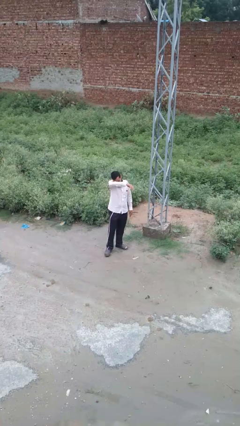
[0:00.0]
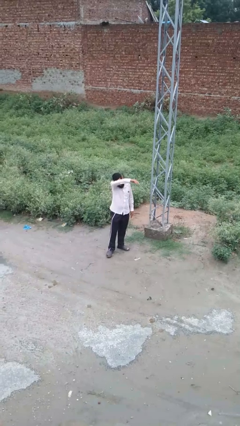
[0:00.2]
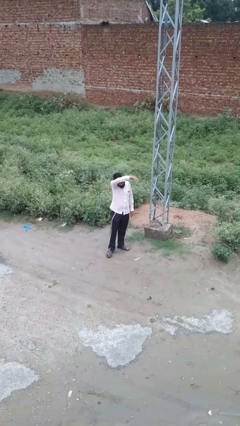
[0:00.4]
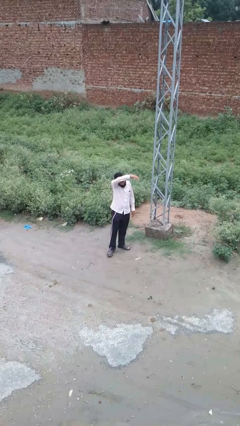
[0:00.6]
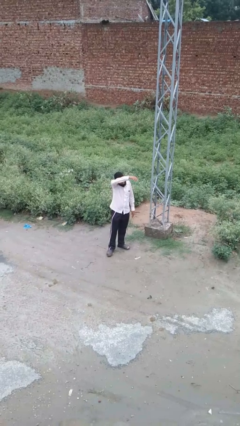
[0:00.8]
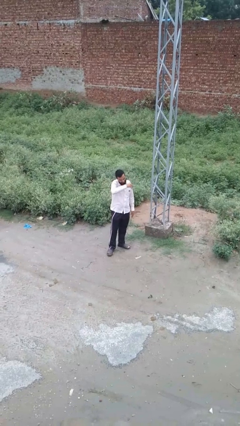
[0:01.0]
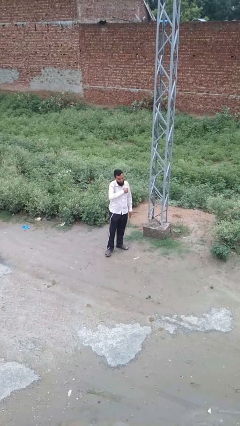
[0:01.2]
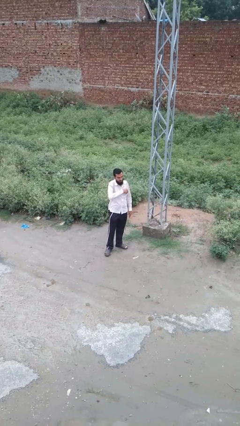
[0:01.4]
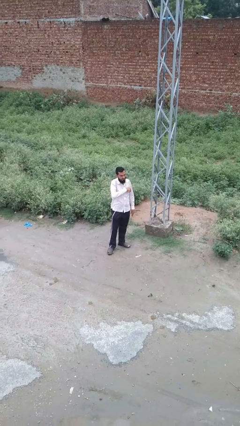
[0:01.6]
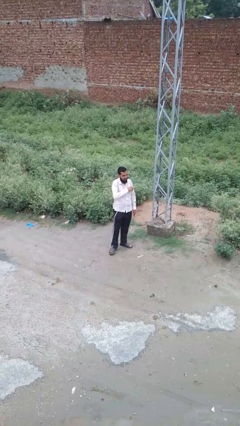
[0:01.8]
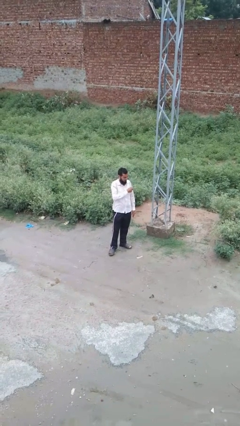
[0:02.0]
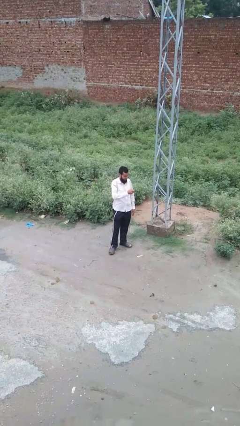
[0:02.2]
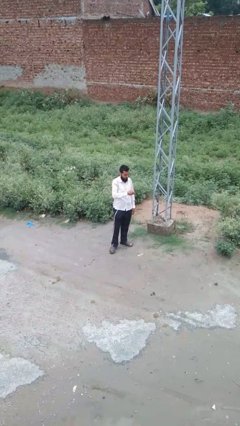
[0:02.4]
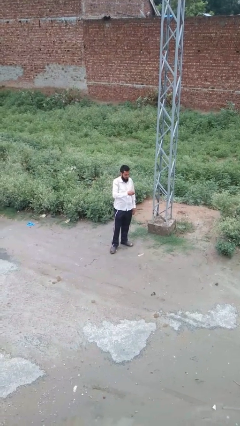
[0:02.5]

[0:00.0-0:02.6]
person takes phone from pocket

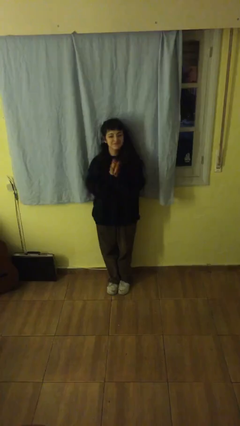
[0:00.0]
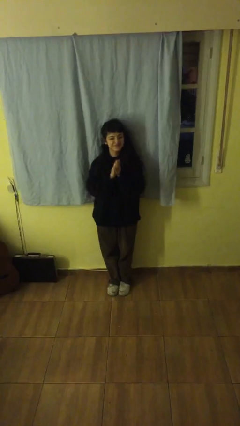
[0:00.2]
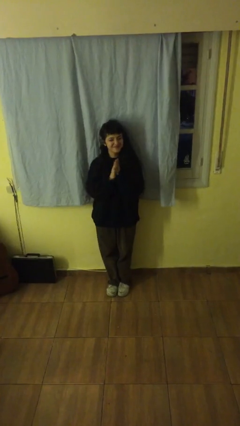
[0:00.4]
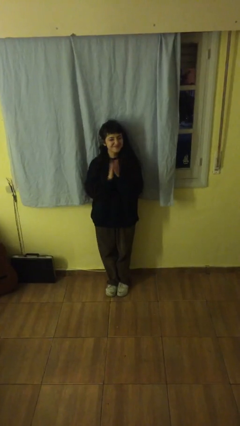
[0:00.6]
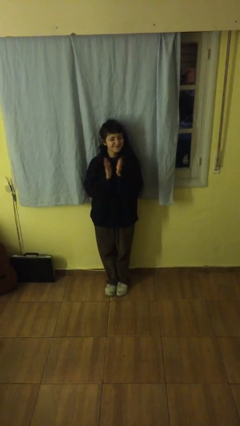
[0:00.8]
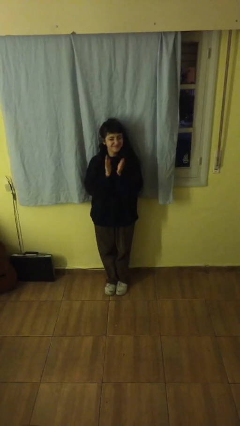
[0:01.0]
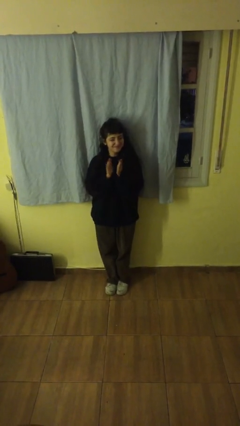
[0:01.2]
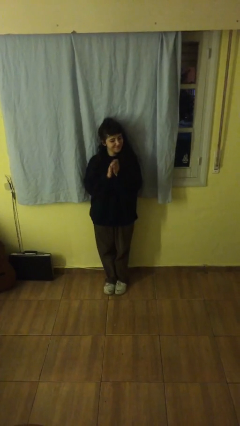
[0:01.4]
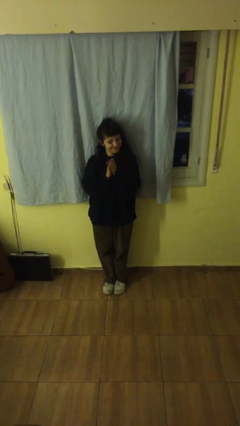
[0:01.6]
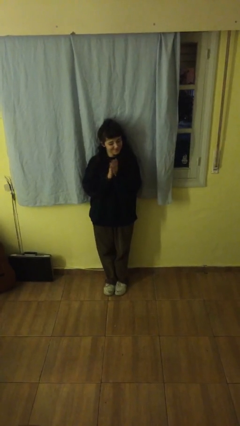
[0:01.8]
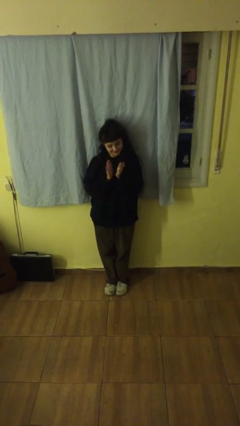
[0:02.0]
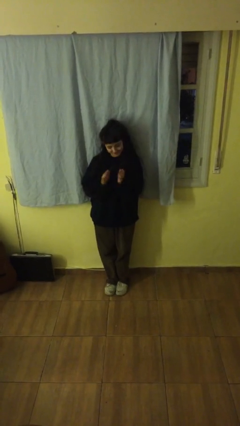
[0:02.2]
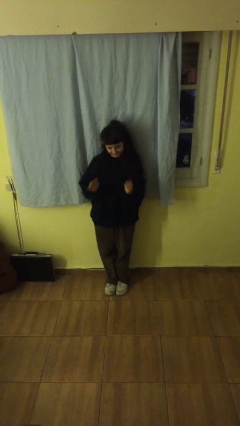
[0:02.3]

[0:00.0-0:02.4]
person claps hands

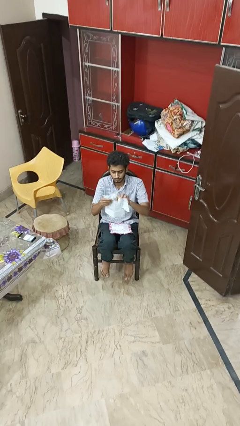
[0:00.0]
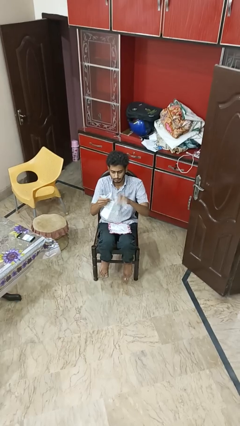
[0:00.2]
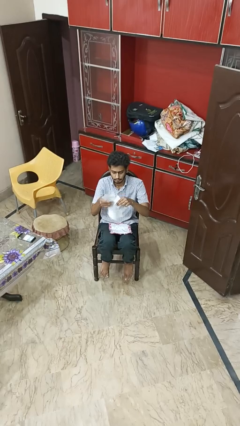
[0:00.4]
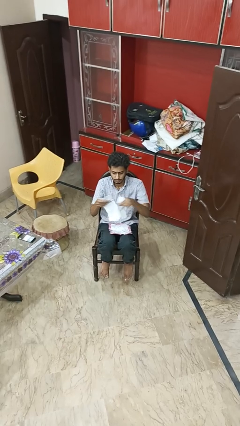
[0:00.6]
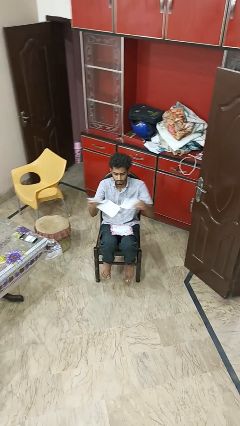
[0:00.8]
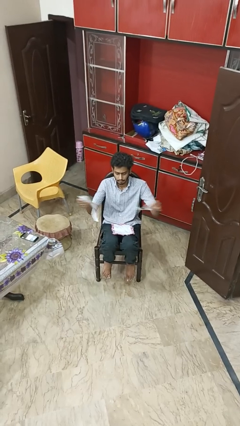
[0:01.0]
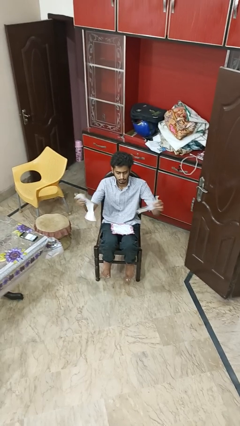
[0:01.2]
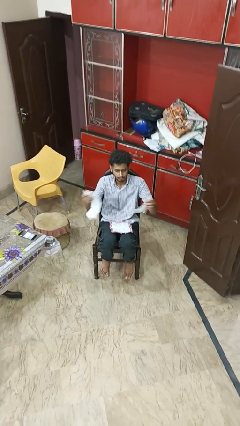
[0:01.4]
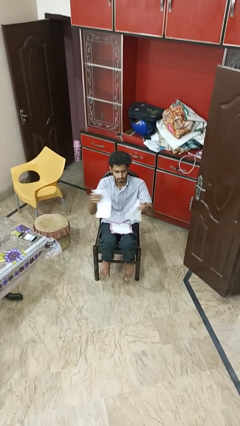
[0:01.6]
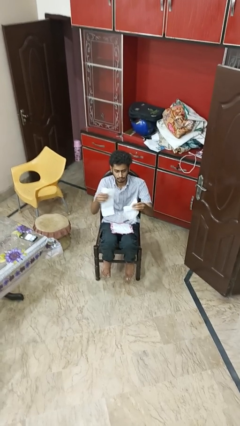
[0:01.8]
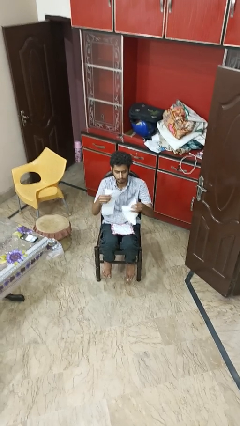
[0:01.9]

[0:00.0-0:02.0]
person tears paper

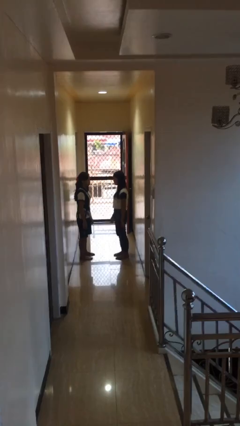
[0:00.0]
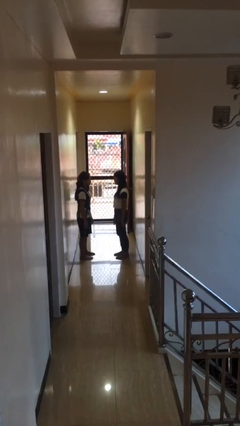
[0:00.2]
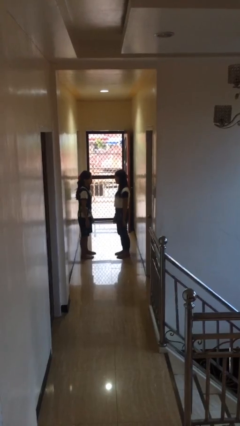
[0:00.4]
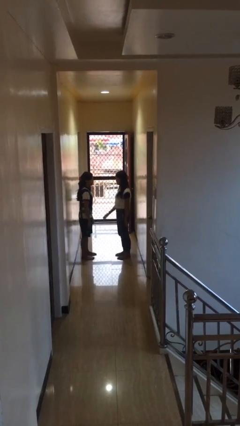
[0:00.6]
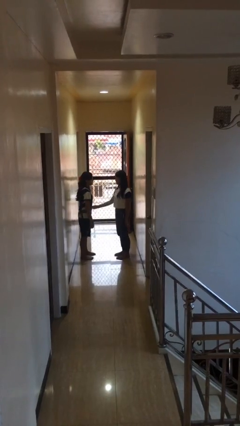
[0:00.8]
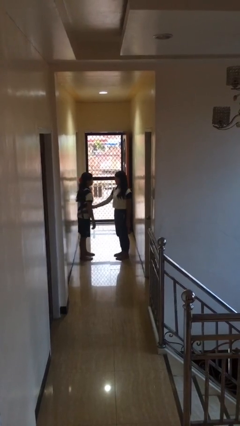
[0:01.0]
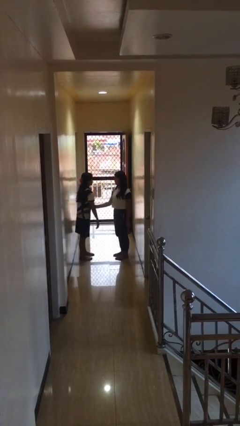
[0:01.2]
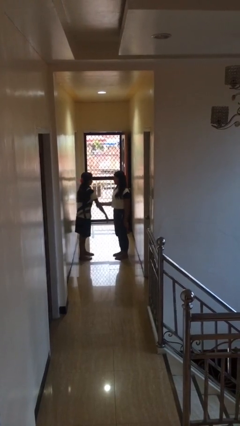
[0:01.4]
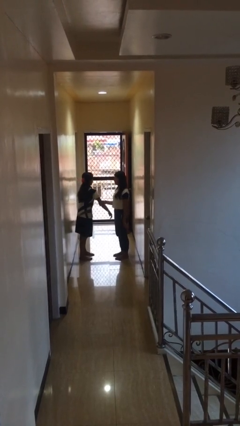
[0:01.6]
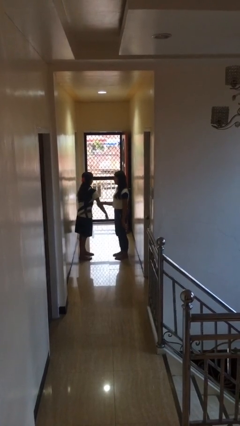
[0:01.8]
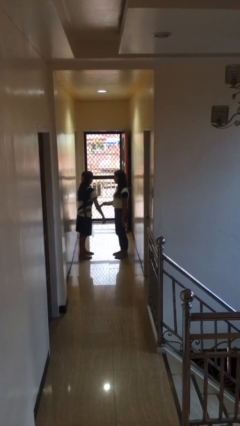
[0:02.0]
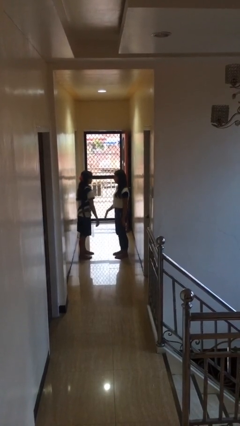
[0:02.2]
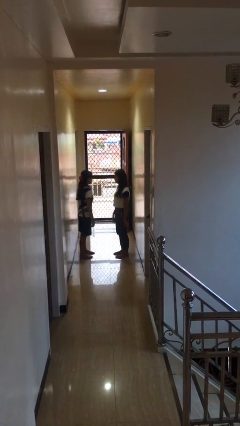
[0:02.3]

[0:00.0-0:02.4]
person grabs person by bicep

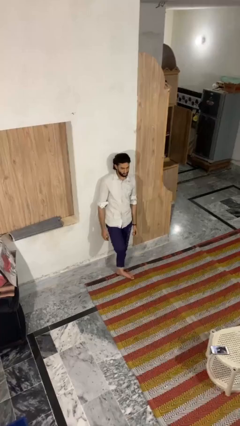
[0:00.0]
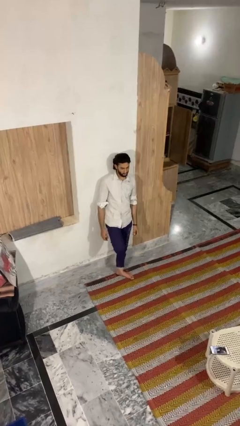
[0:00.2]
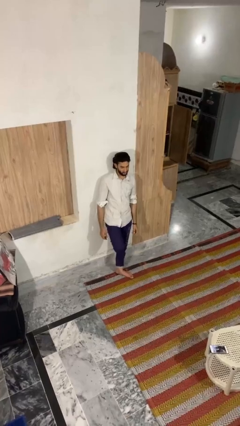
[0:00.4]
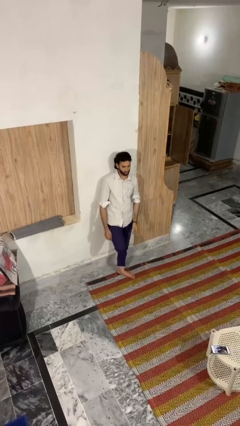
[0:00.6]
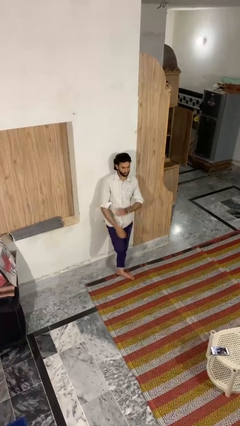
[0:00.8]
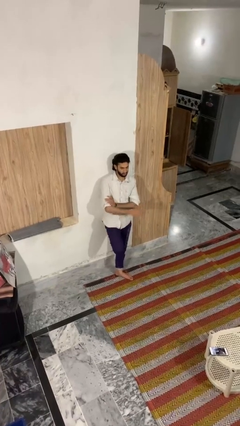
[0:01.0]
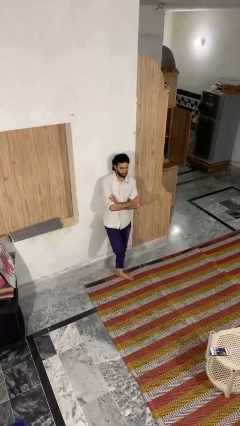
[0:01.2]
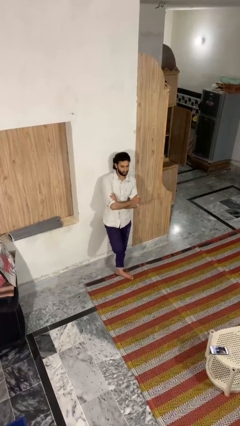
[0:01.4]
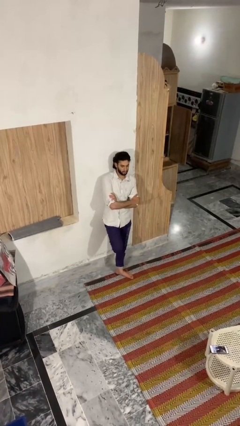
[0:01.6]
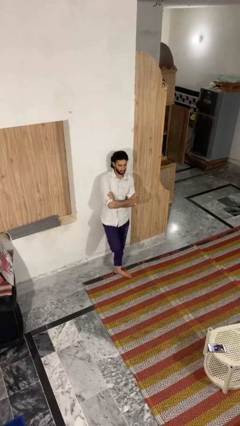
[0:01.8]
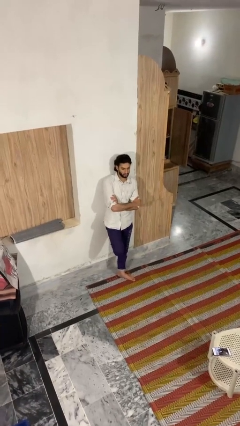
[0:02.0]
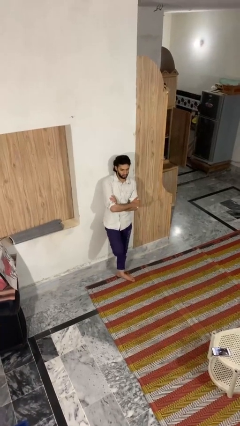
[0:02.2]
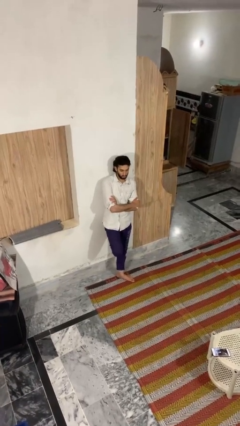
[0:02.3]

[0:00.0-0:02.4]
person crosses arms

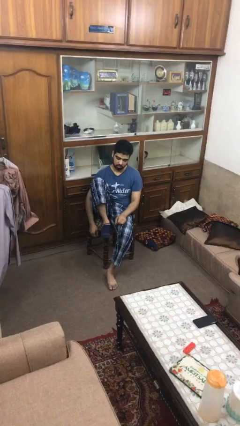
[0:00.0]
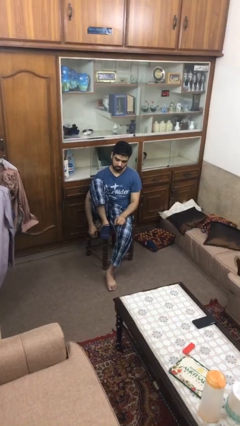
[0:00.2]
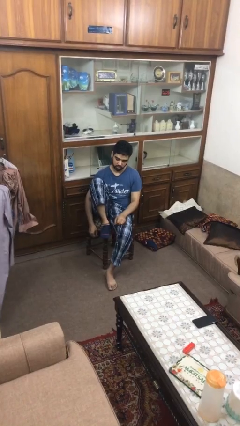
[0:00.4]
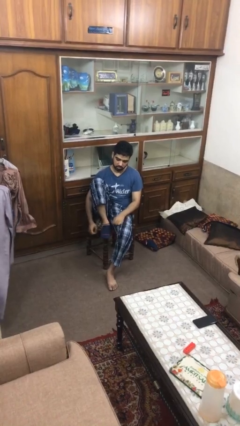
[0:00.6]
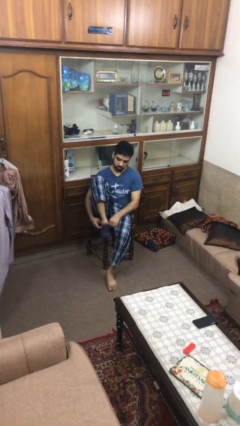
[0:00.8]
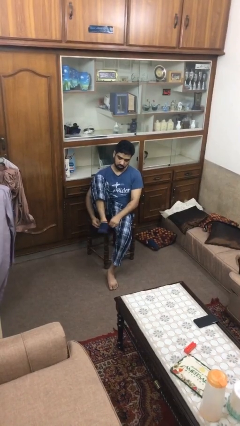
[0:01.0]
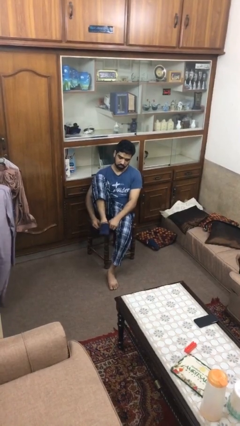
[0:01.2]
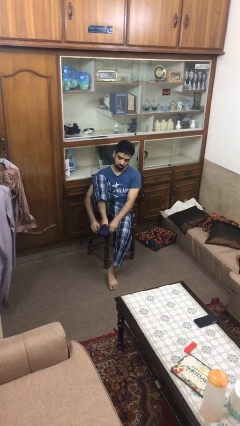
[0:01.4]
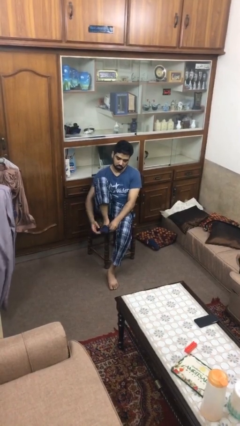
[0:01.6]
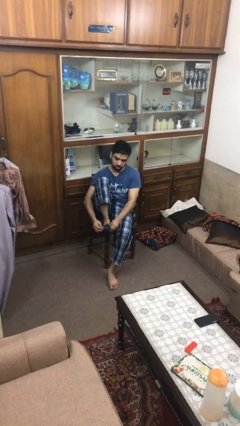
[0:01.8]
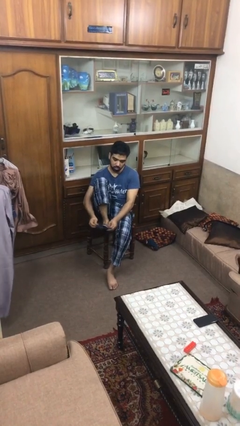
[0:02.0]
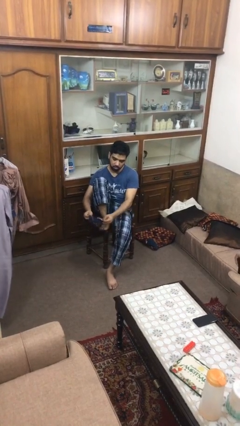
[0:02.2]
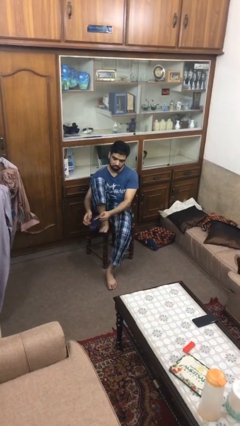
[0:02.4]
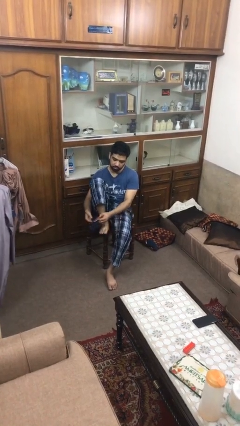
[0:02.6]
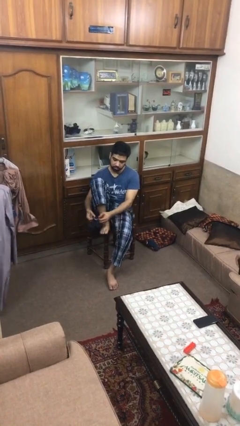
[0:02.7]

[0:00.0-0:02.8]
person takes off socks

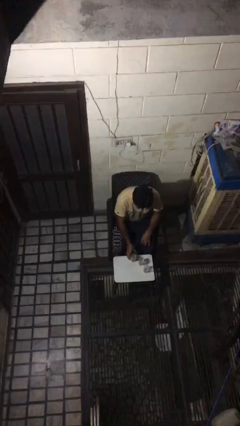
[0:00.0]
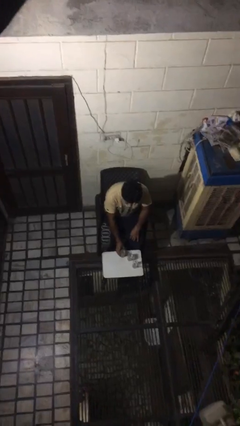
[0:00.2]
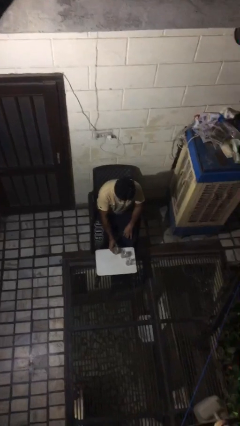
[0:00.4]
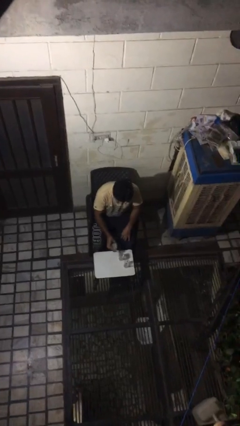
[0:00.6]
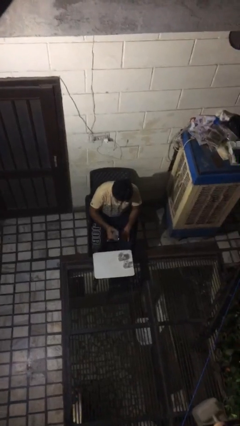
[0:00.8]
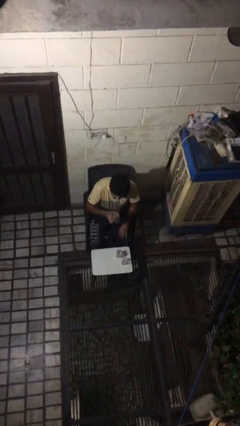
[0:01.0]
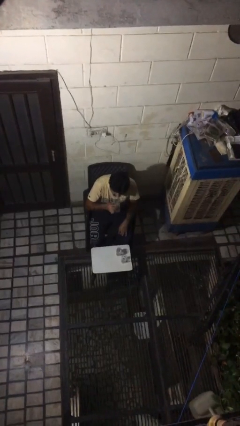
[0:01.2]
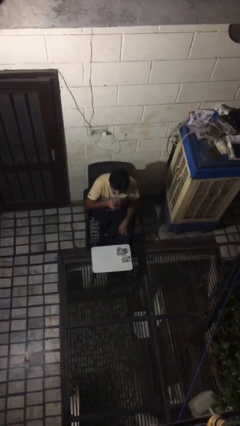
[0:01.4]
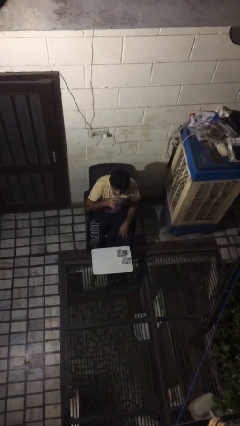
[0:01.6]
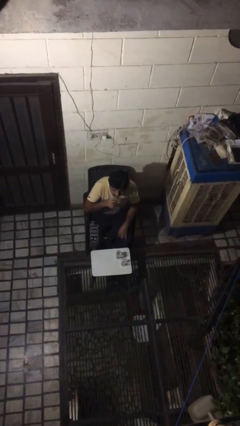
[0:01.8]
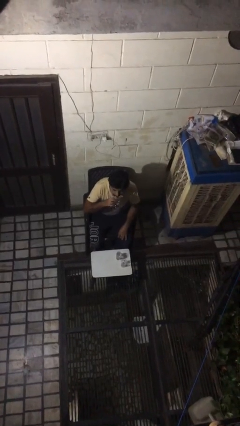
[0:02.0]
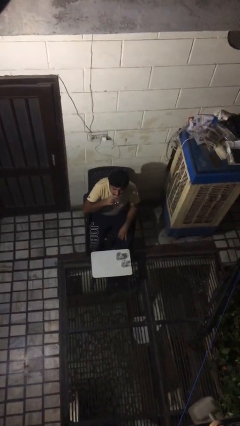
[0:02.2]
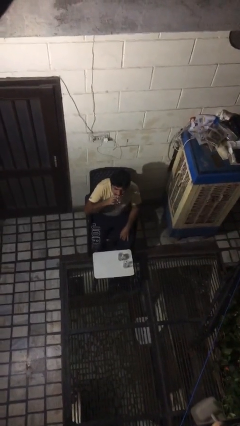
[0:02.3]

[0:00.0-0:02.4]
person picks up object from table

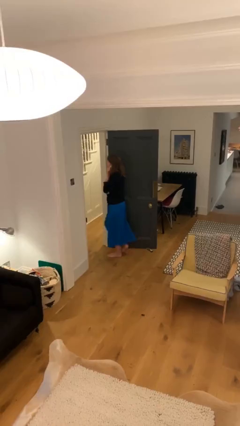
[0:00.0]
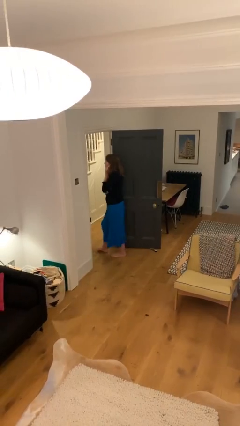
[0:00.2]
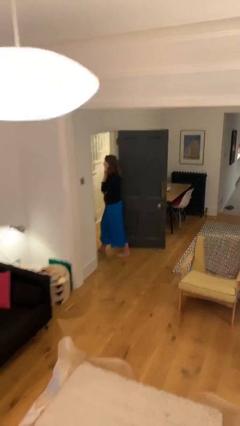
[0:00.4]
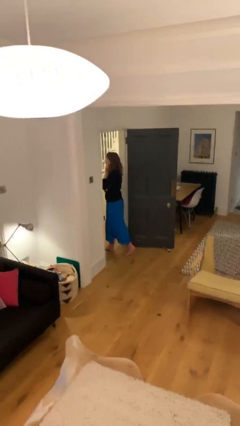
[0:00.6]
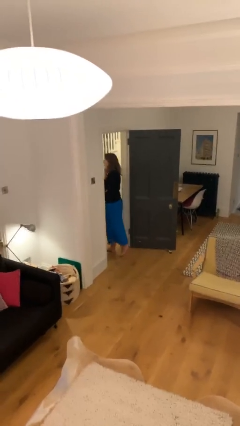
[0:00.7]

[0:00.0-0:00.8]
person exits scene through structure
